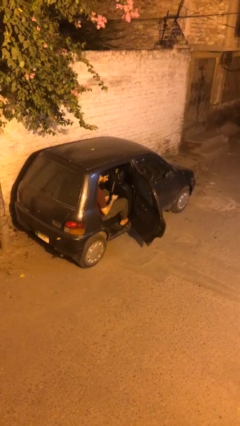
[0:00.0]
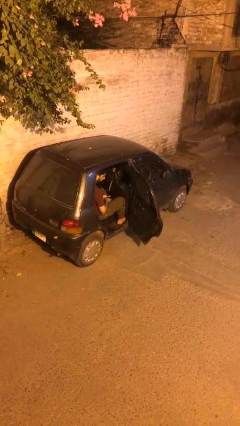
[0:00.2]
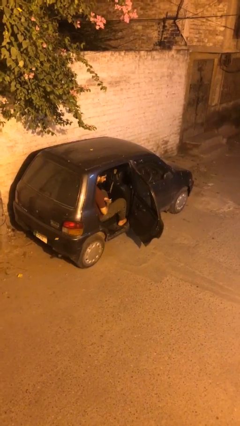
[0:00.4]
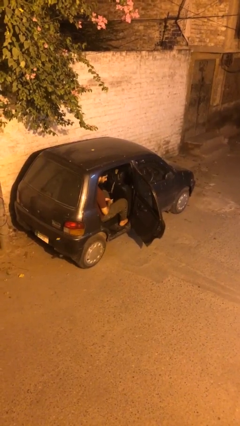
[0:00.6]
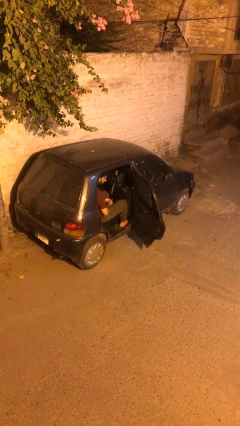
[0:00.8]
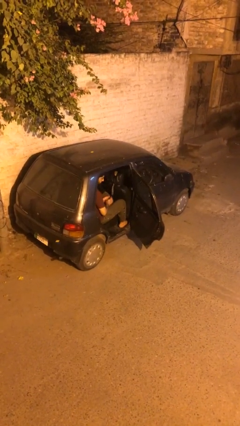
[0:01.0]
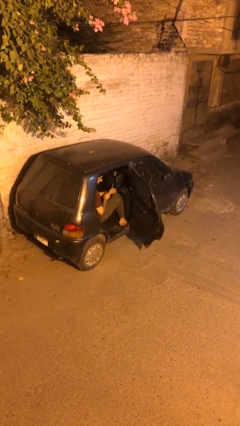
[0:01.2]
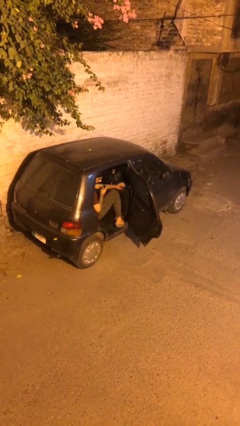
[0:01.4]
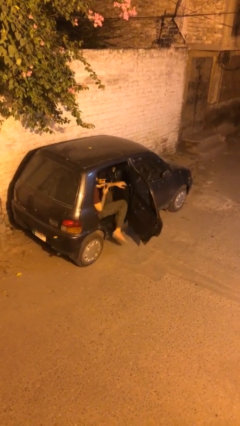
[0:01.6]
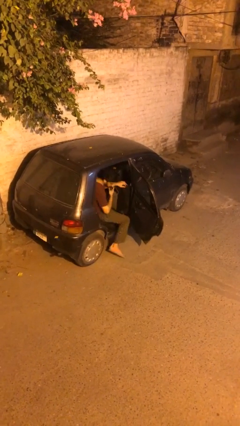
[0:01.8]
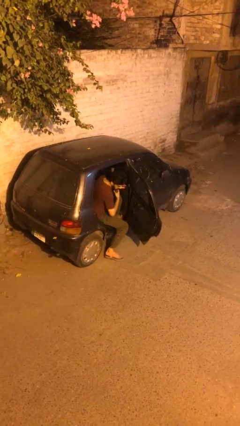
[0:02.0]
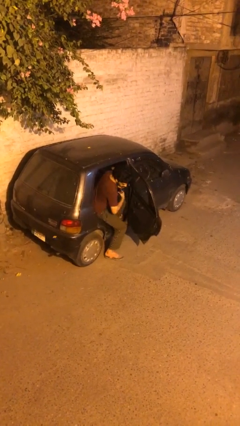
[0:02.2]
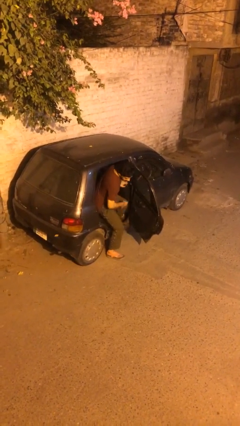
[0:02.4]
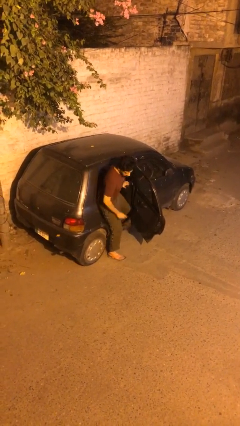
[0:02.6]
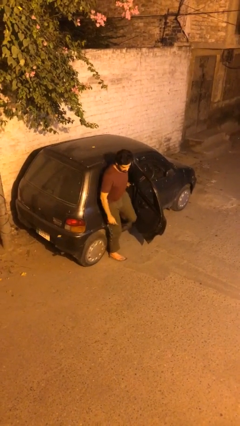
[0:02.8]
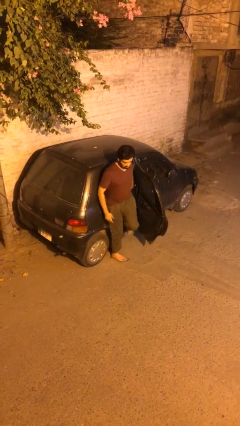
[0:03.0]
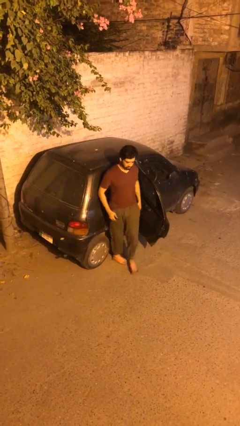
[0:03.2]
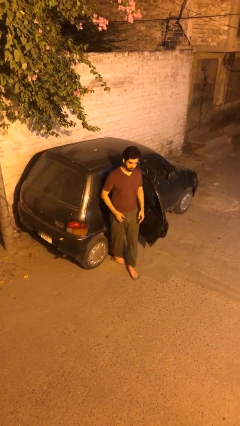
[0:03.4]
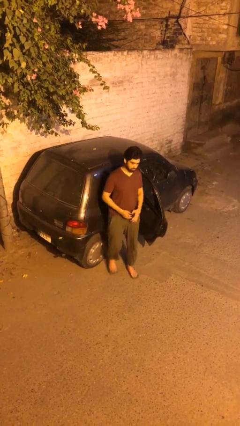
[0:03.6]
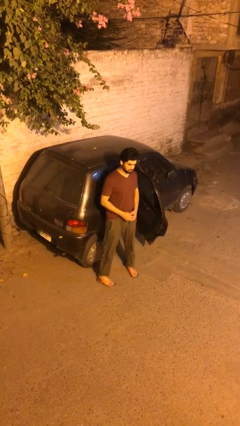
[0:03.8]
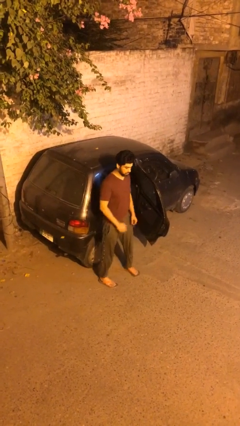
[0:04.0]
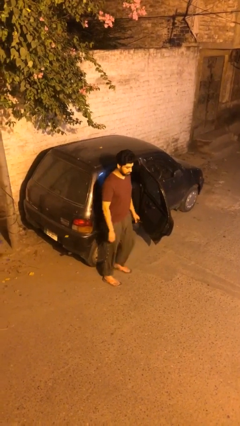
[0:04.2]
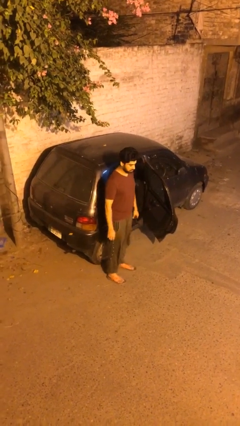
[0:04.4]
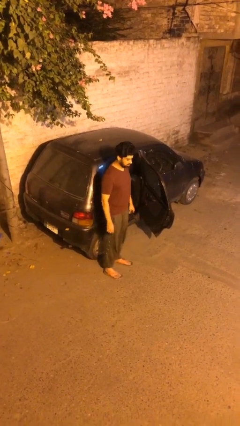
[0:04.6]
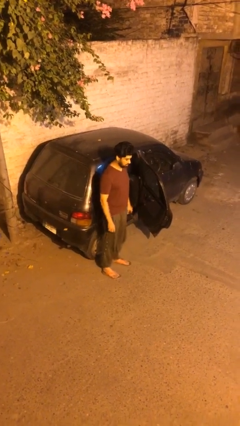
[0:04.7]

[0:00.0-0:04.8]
person exits car

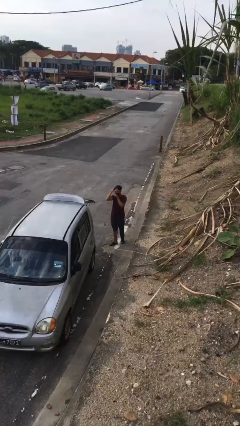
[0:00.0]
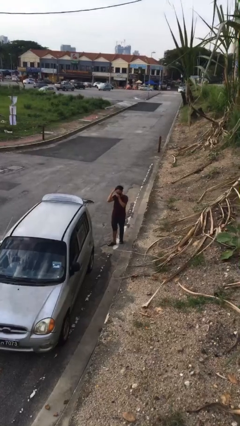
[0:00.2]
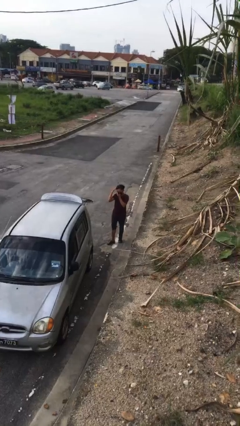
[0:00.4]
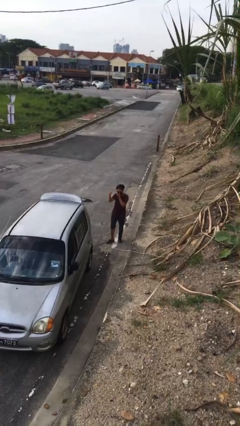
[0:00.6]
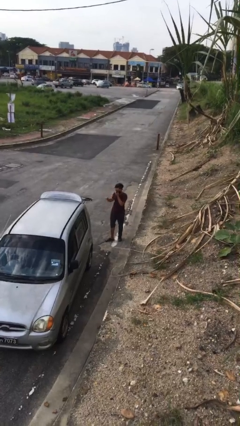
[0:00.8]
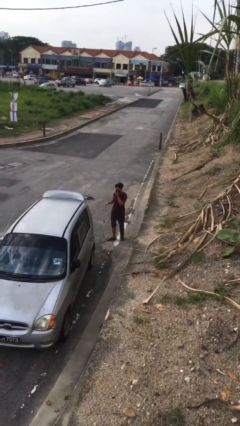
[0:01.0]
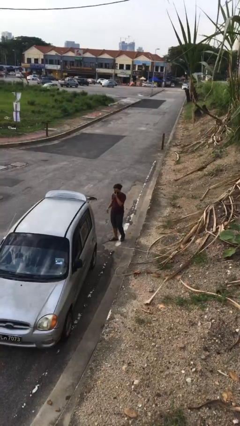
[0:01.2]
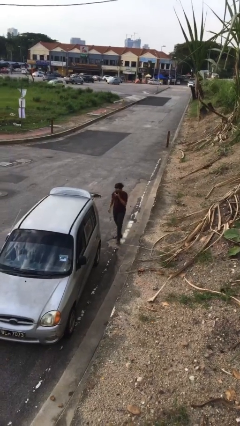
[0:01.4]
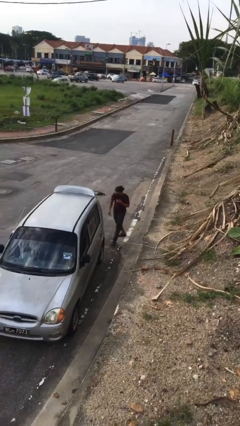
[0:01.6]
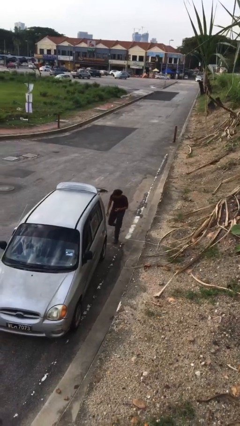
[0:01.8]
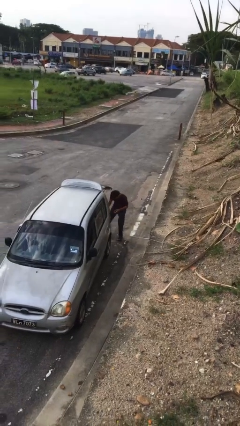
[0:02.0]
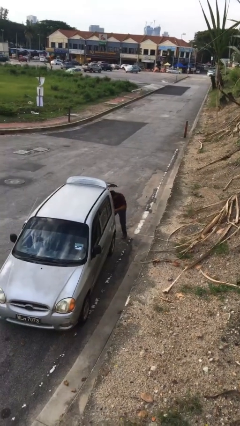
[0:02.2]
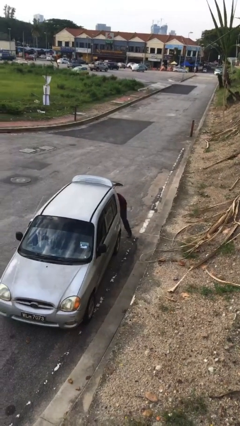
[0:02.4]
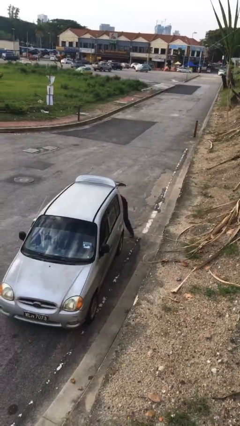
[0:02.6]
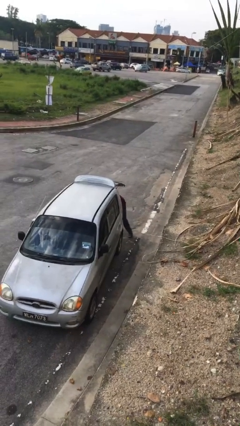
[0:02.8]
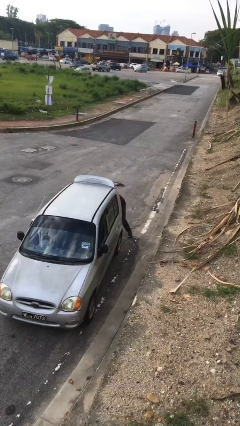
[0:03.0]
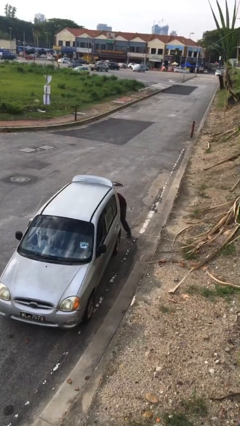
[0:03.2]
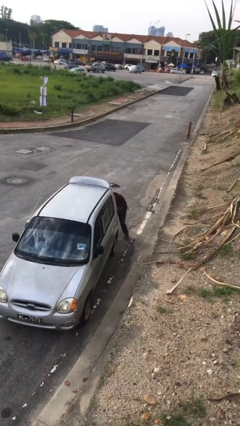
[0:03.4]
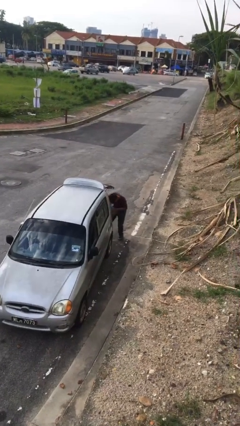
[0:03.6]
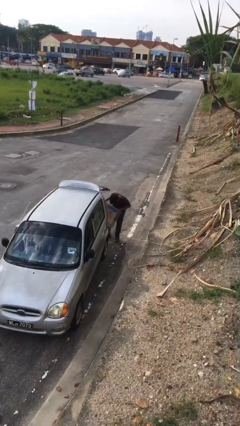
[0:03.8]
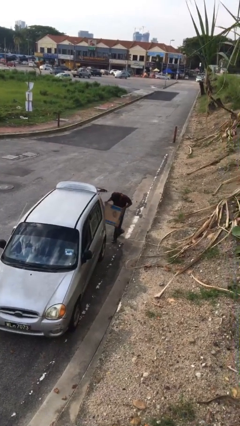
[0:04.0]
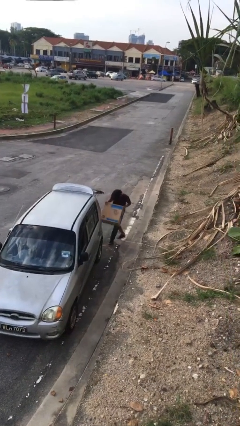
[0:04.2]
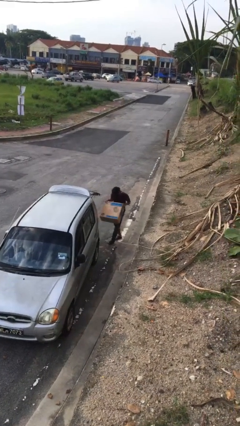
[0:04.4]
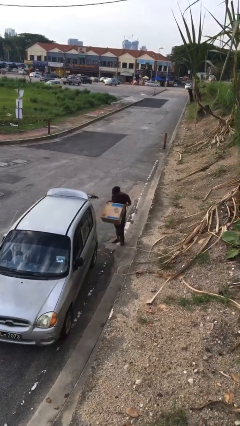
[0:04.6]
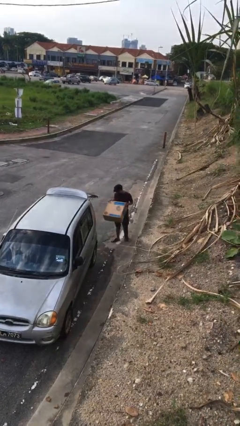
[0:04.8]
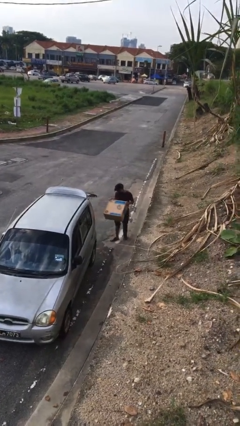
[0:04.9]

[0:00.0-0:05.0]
person unloads car

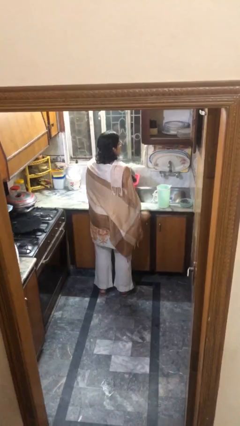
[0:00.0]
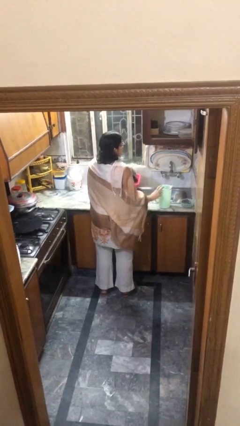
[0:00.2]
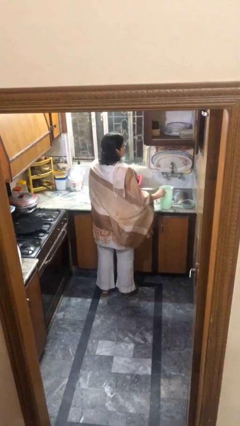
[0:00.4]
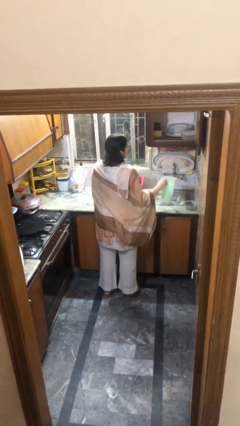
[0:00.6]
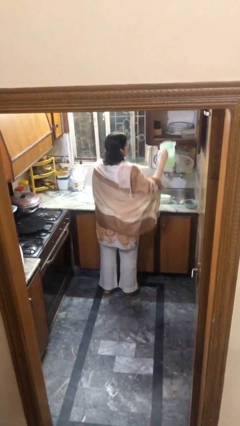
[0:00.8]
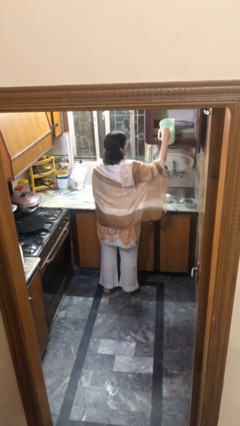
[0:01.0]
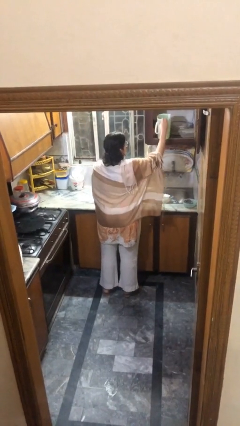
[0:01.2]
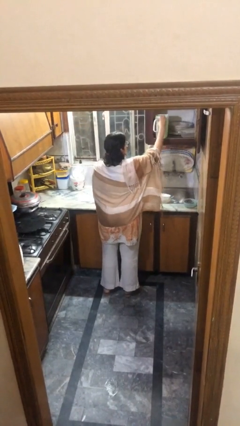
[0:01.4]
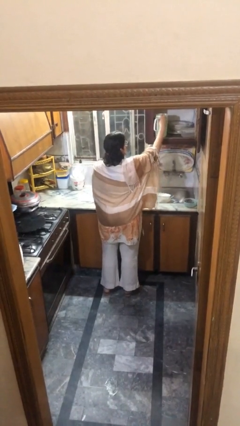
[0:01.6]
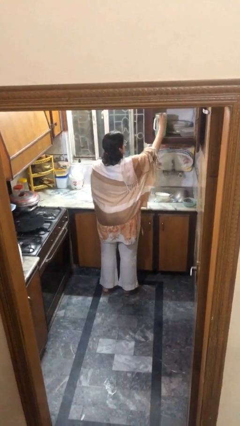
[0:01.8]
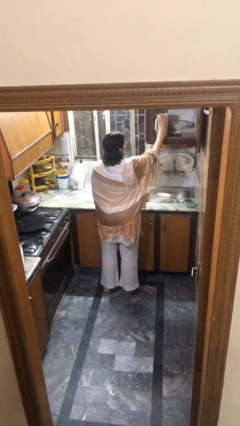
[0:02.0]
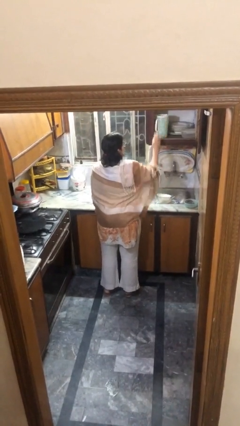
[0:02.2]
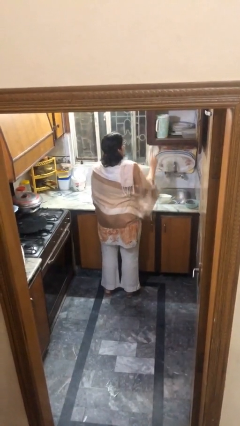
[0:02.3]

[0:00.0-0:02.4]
person puts object into kitchen drawer

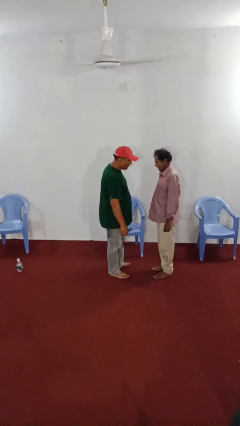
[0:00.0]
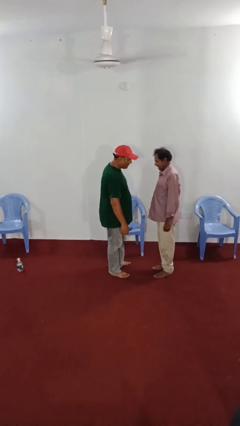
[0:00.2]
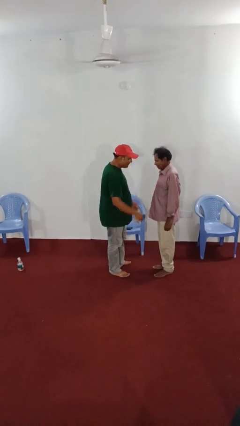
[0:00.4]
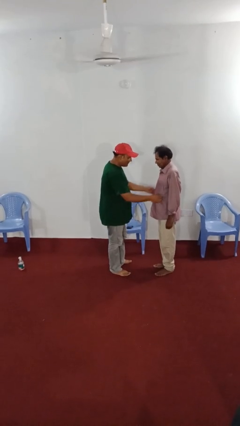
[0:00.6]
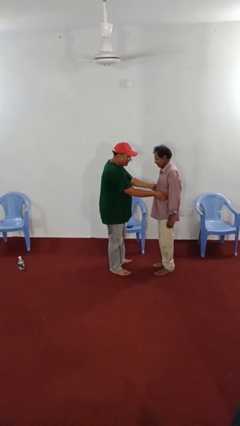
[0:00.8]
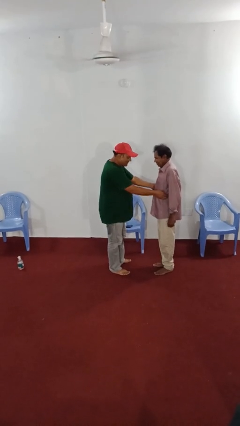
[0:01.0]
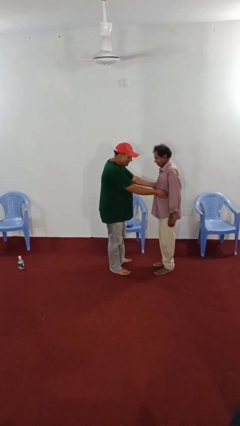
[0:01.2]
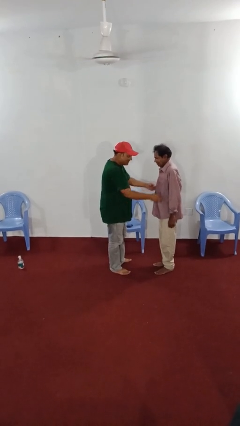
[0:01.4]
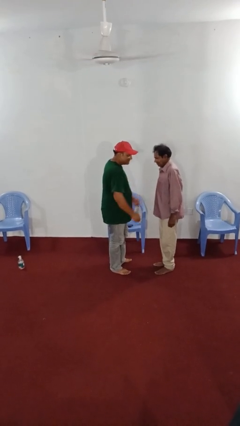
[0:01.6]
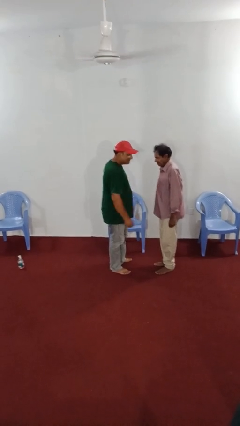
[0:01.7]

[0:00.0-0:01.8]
person tickles person

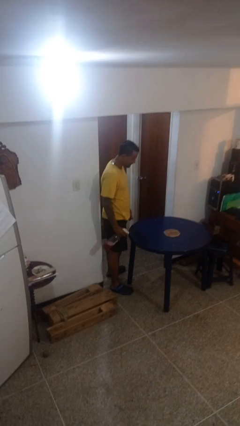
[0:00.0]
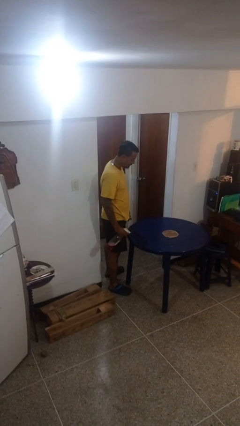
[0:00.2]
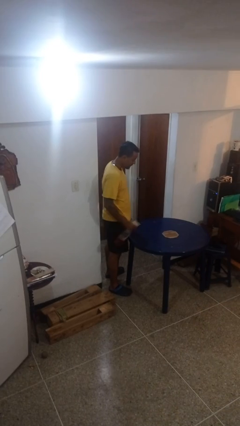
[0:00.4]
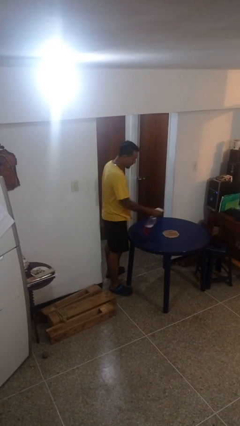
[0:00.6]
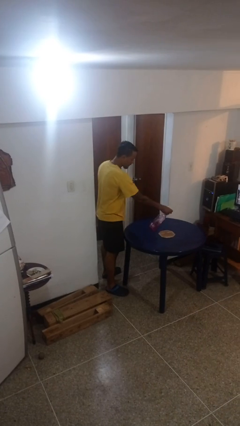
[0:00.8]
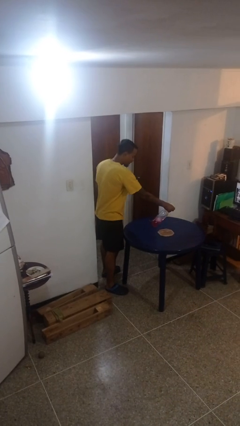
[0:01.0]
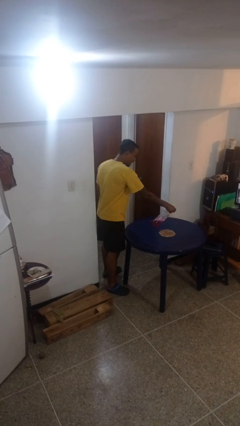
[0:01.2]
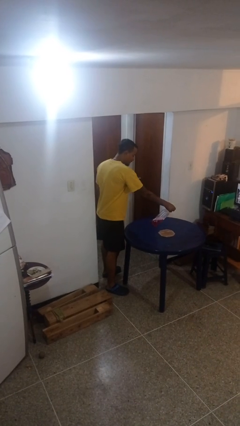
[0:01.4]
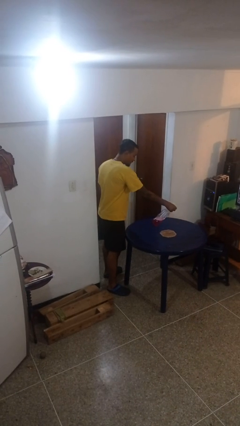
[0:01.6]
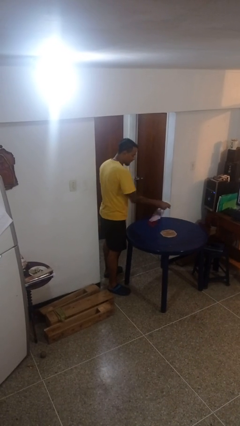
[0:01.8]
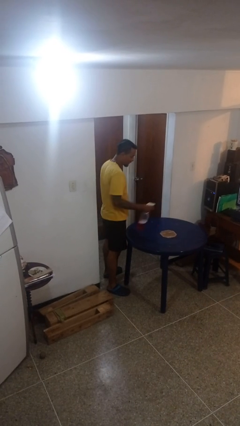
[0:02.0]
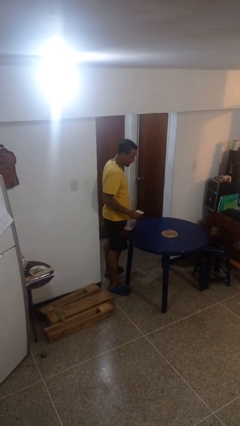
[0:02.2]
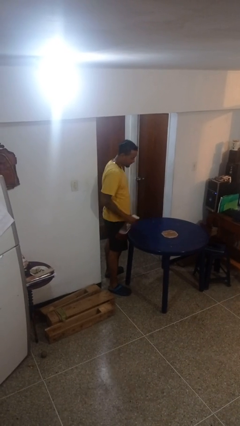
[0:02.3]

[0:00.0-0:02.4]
person sprays from bottle

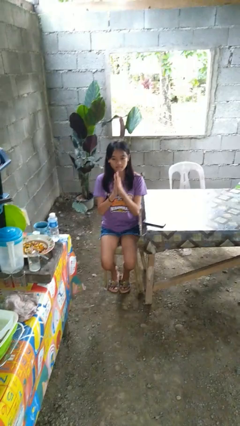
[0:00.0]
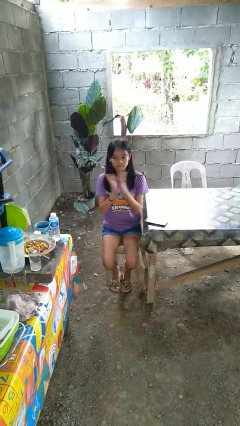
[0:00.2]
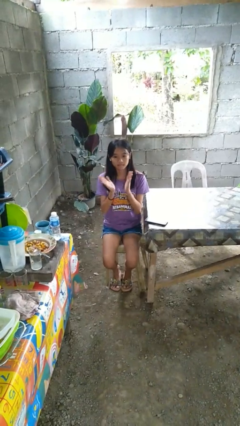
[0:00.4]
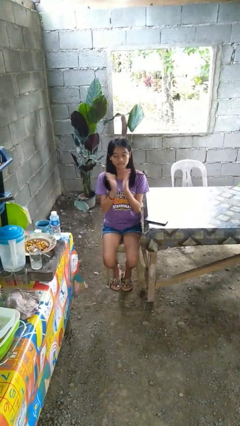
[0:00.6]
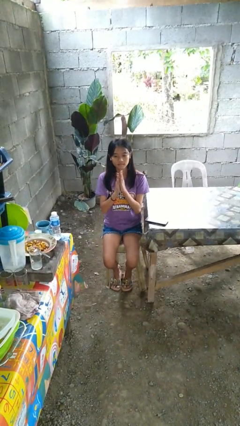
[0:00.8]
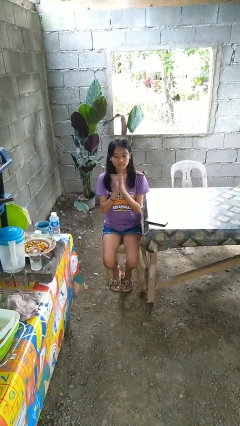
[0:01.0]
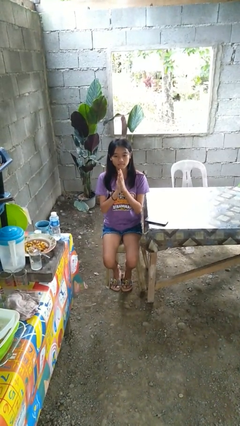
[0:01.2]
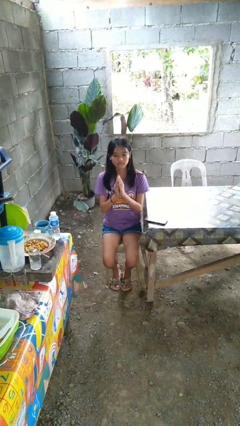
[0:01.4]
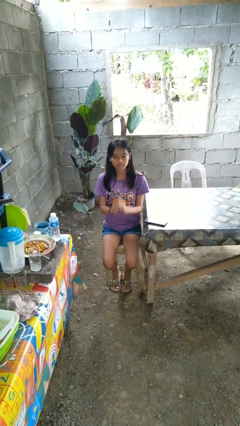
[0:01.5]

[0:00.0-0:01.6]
person claps hands
